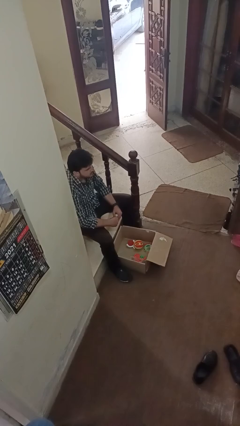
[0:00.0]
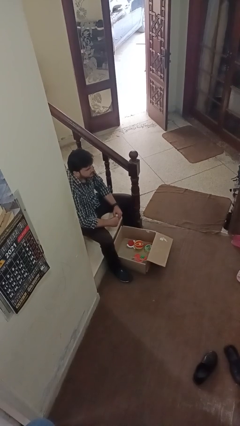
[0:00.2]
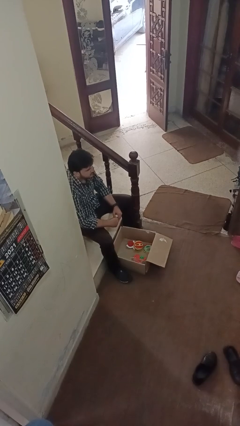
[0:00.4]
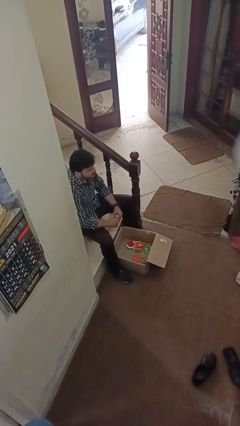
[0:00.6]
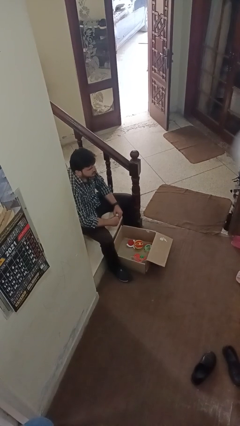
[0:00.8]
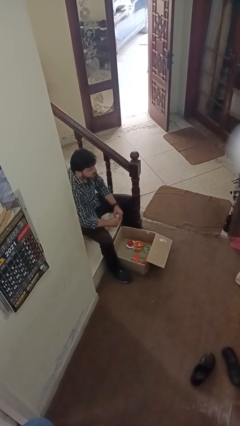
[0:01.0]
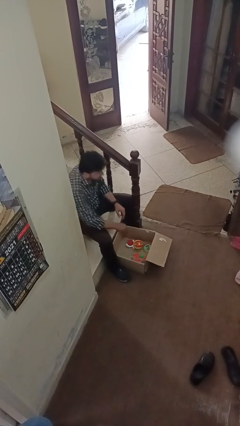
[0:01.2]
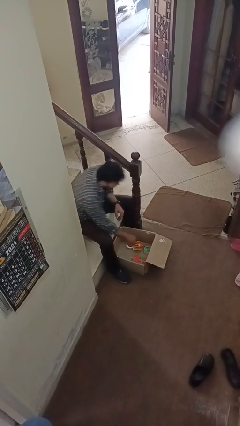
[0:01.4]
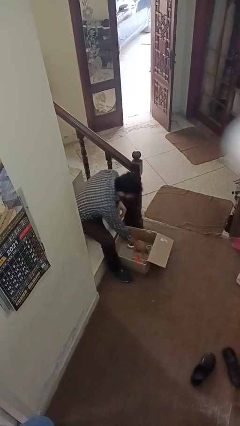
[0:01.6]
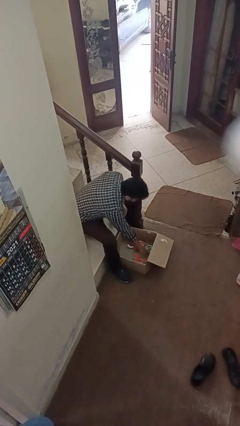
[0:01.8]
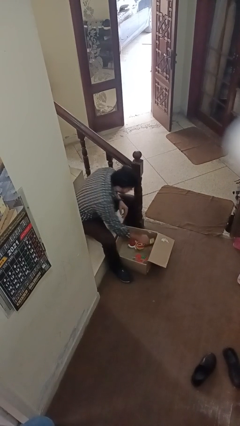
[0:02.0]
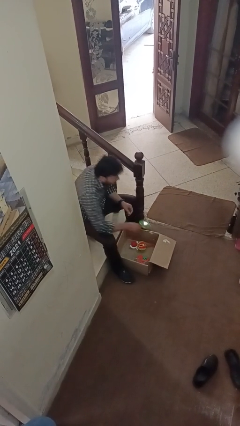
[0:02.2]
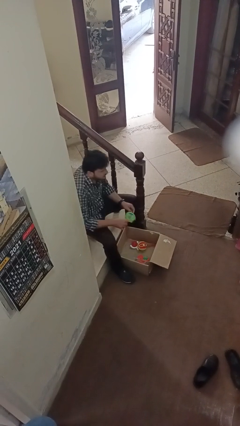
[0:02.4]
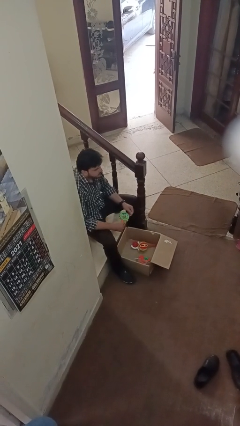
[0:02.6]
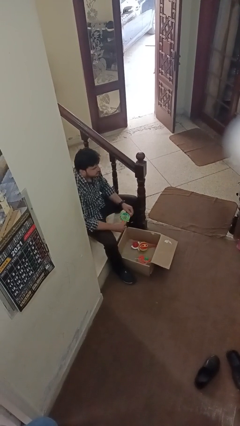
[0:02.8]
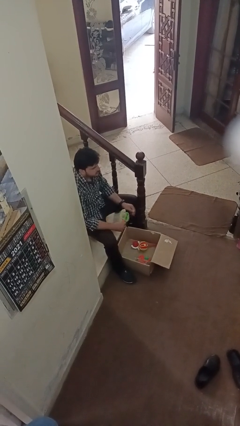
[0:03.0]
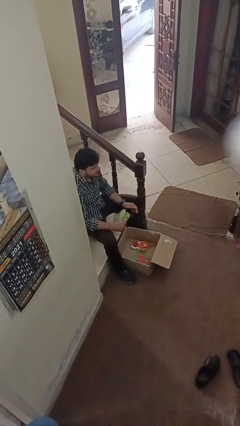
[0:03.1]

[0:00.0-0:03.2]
person takes object from box

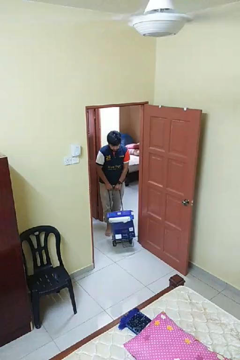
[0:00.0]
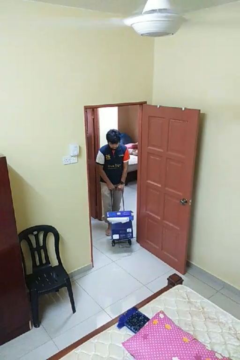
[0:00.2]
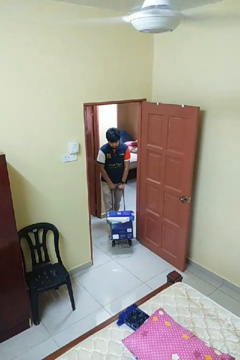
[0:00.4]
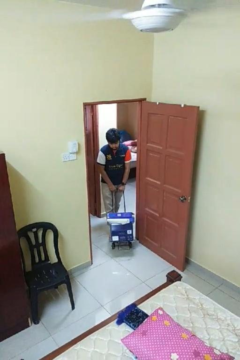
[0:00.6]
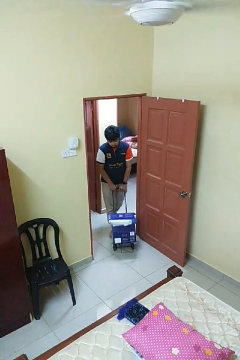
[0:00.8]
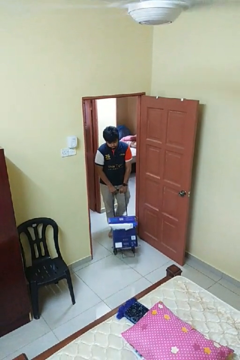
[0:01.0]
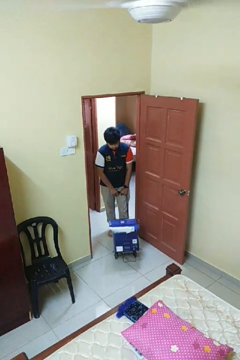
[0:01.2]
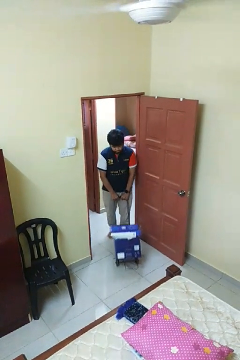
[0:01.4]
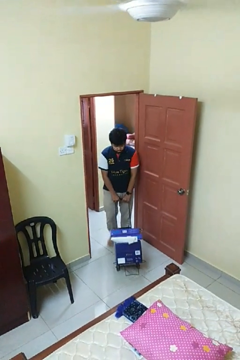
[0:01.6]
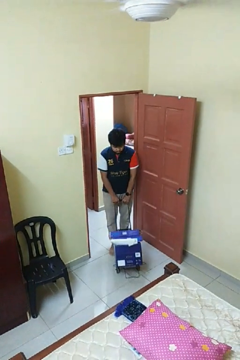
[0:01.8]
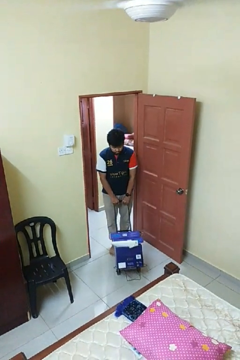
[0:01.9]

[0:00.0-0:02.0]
person pushes wheeled cart

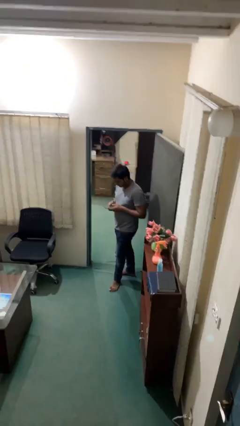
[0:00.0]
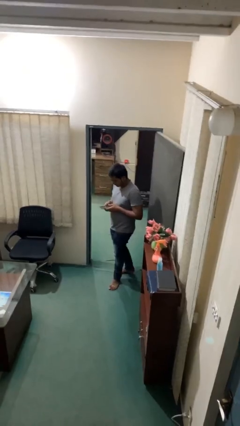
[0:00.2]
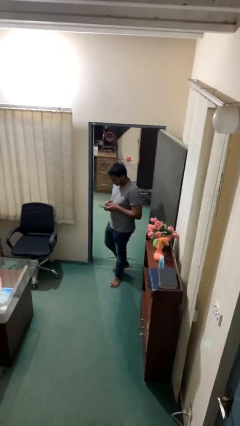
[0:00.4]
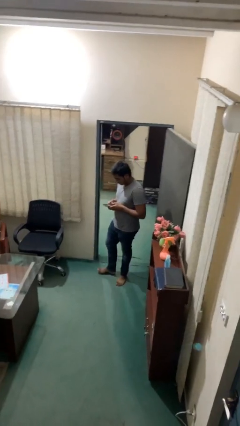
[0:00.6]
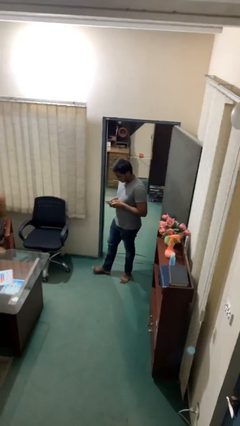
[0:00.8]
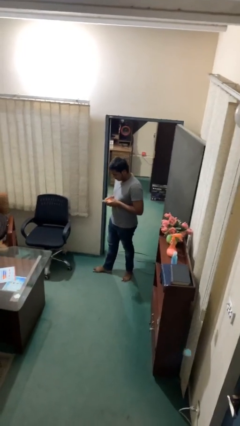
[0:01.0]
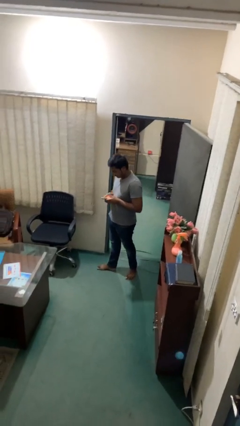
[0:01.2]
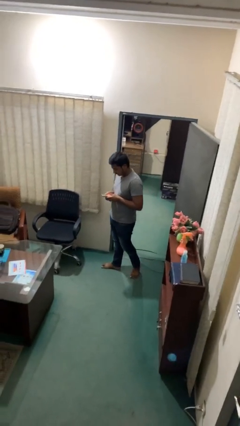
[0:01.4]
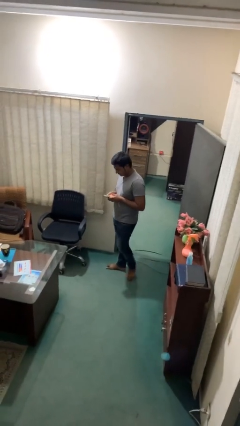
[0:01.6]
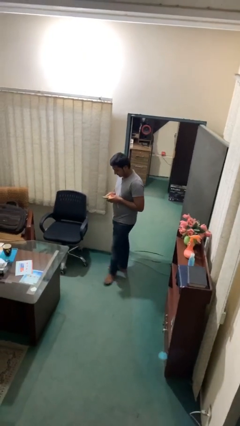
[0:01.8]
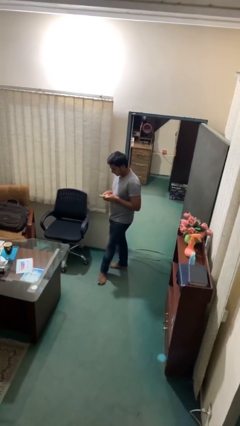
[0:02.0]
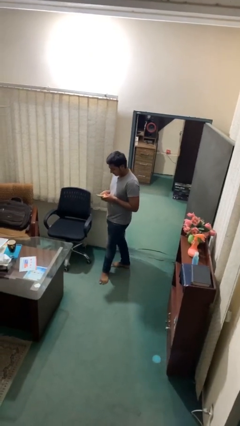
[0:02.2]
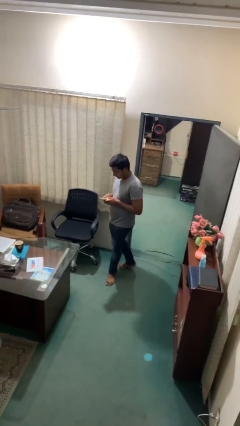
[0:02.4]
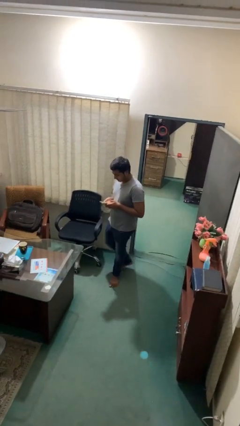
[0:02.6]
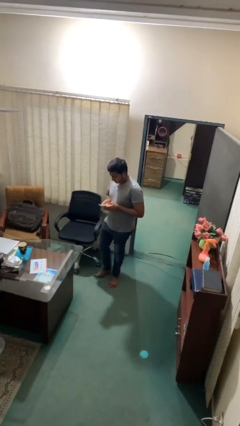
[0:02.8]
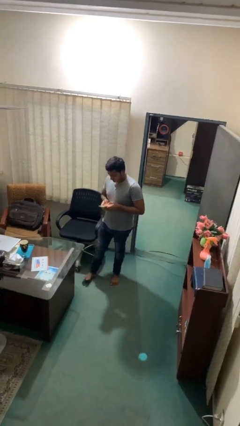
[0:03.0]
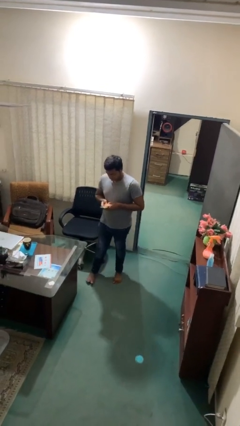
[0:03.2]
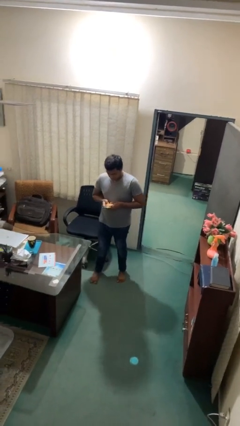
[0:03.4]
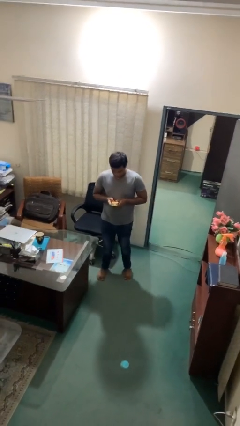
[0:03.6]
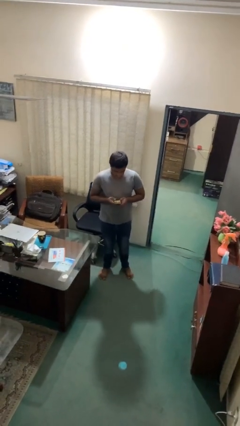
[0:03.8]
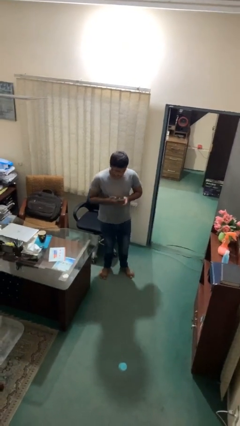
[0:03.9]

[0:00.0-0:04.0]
person texts on phone

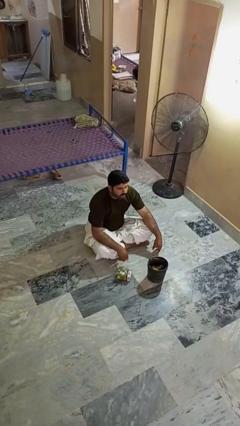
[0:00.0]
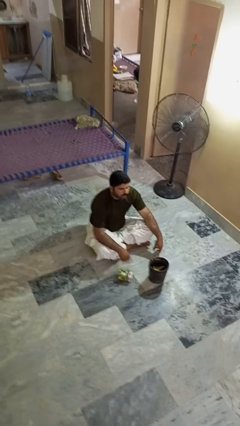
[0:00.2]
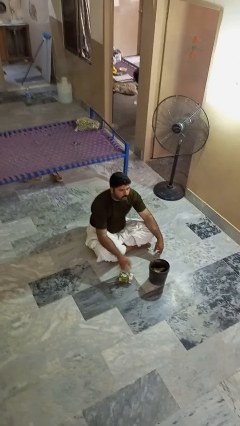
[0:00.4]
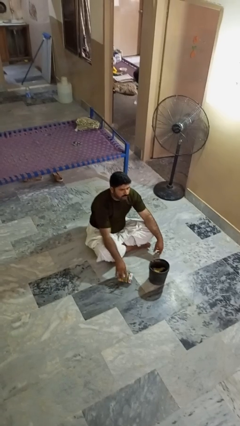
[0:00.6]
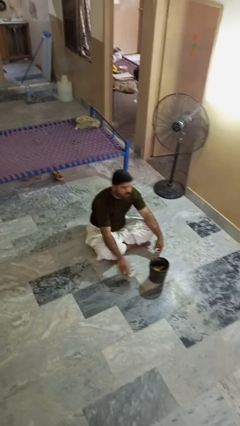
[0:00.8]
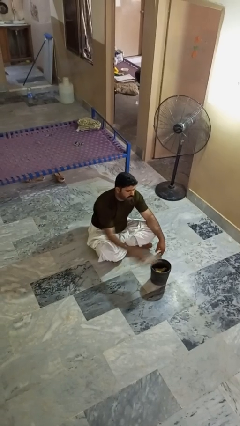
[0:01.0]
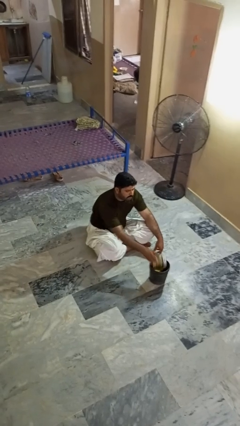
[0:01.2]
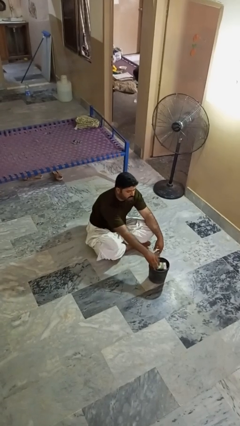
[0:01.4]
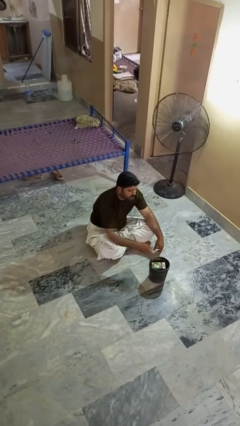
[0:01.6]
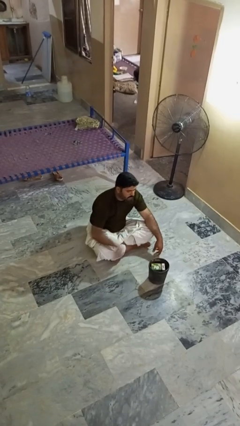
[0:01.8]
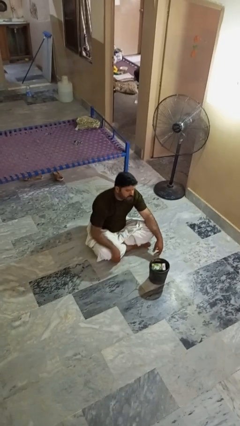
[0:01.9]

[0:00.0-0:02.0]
person puts object into basket

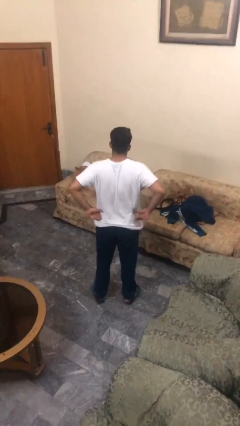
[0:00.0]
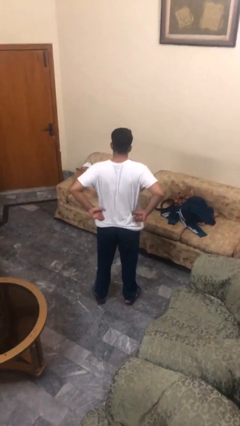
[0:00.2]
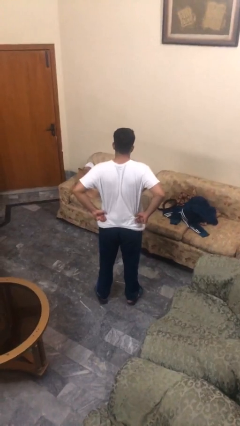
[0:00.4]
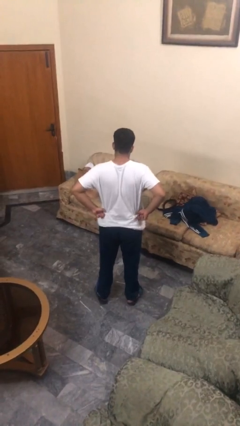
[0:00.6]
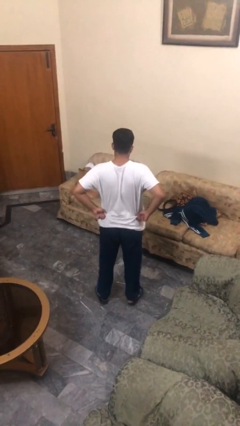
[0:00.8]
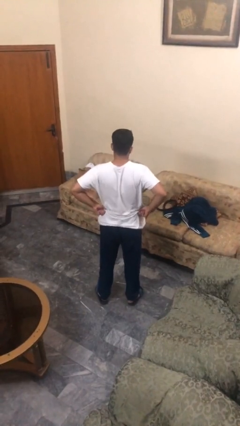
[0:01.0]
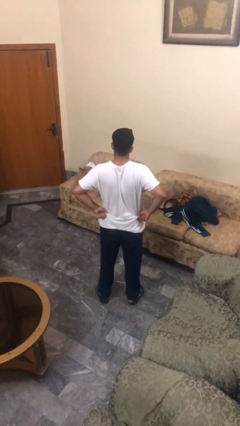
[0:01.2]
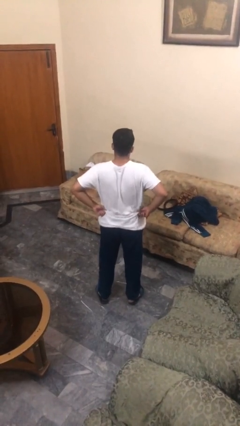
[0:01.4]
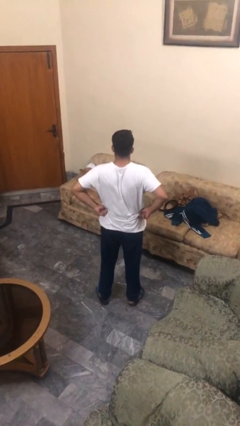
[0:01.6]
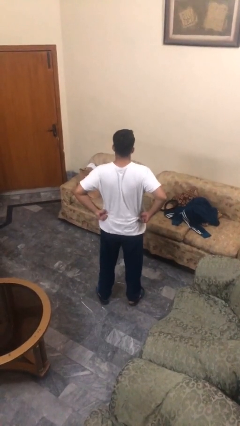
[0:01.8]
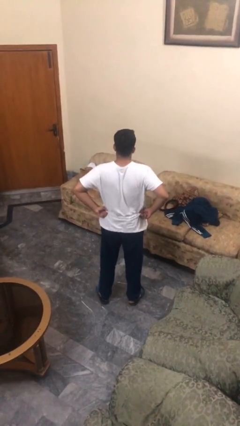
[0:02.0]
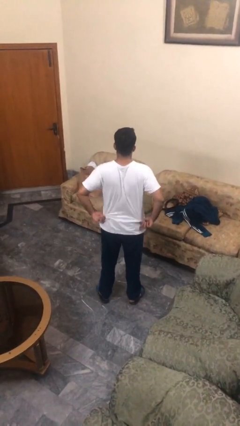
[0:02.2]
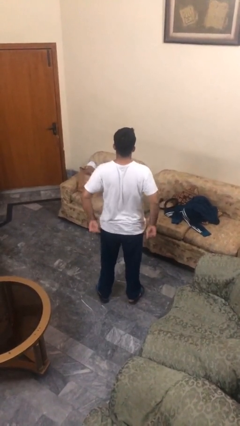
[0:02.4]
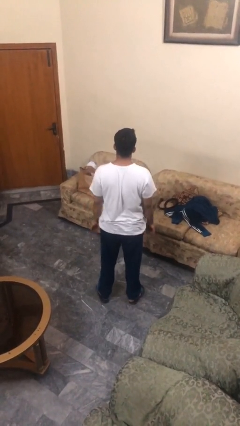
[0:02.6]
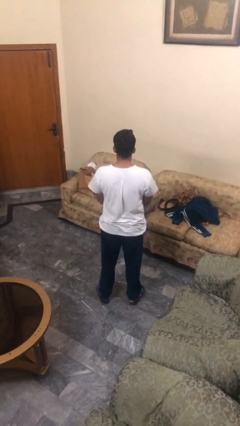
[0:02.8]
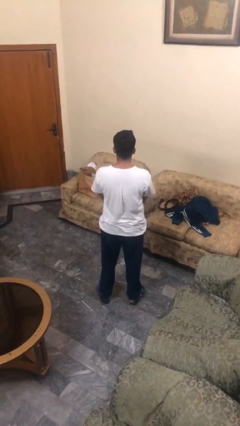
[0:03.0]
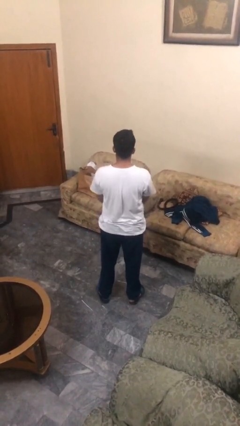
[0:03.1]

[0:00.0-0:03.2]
person hikes up pants

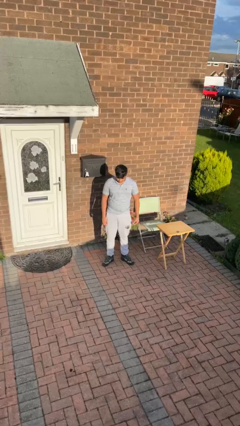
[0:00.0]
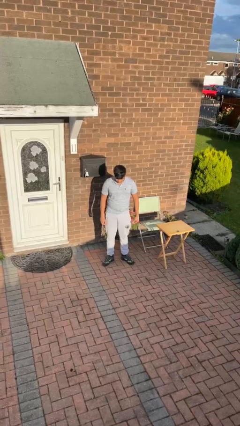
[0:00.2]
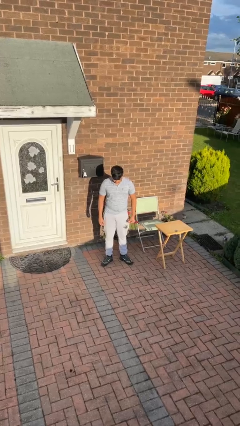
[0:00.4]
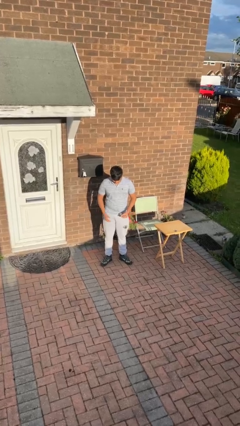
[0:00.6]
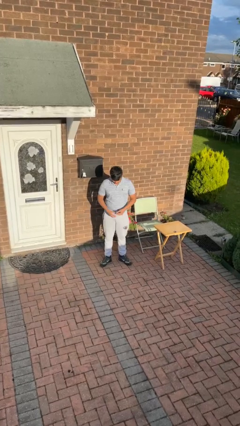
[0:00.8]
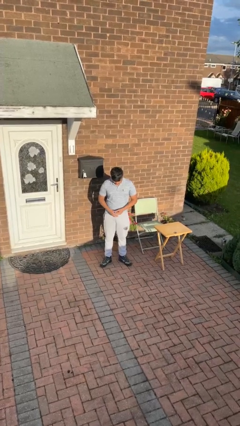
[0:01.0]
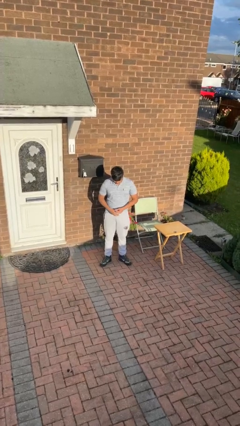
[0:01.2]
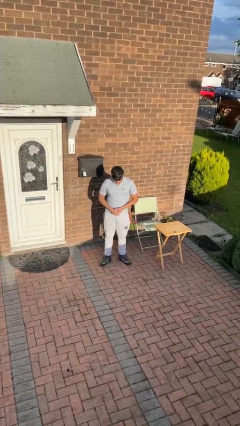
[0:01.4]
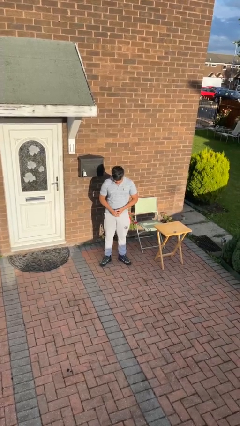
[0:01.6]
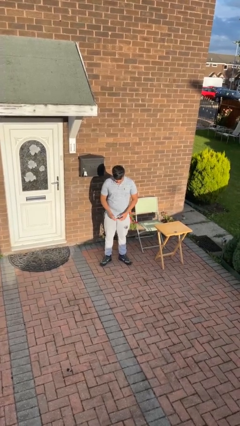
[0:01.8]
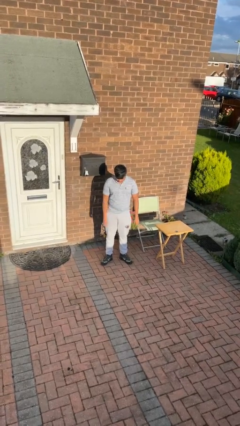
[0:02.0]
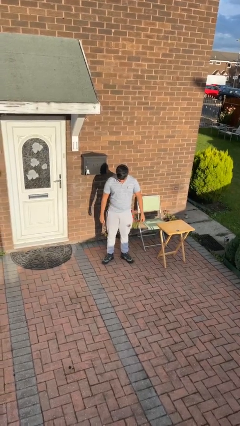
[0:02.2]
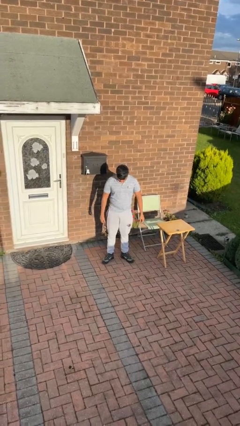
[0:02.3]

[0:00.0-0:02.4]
person puts on ring

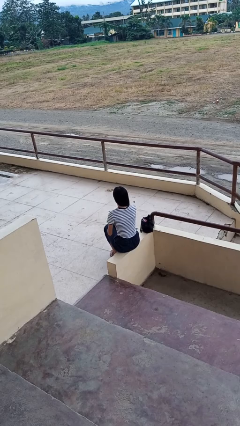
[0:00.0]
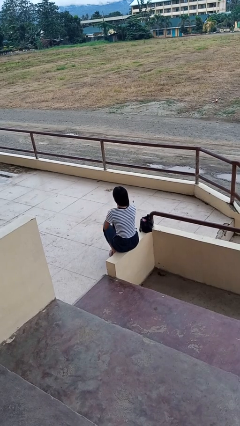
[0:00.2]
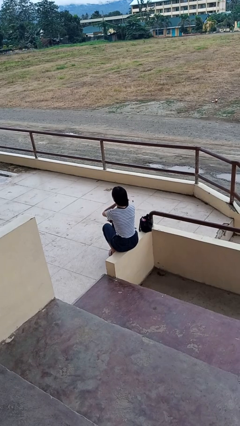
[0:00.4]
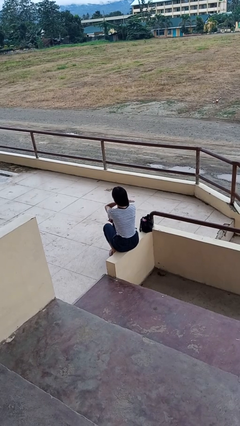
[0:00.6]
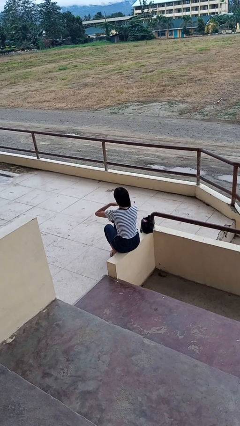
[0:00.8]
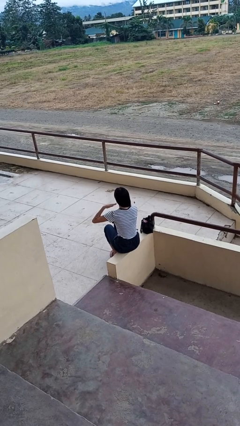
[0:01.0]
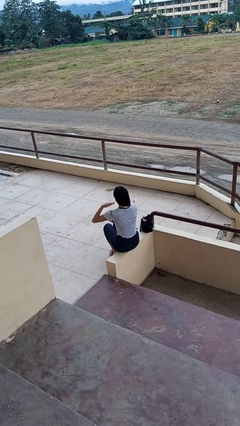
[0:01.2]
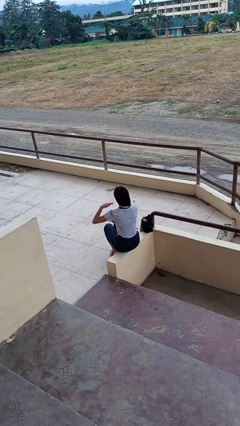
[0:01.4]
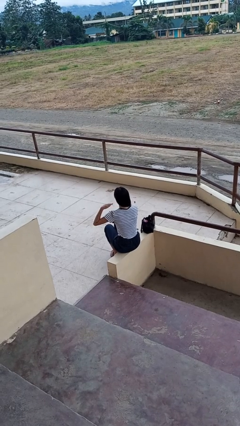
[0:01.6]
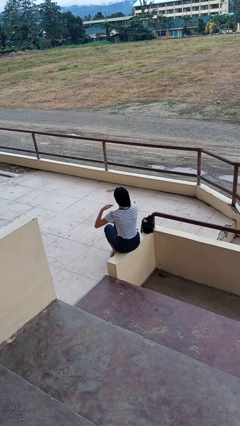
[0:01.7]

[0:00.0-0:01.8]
person gestures cut
